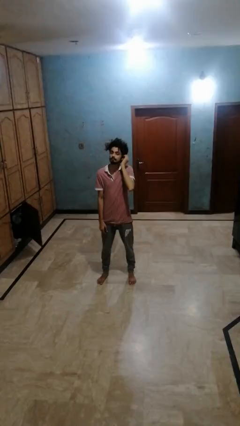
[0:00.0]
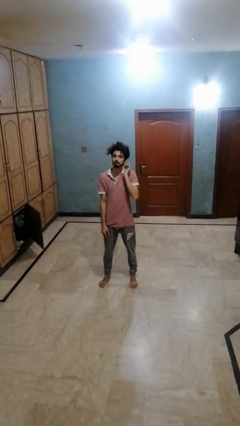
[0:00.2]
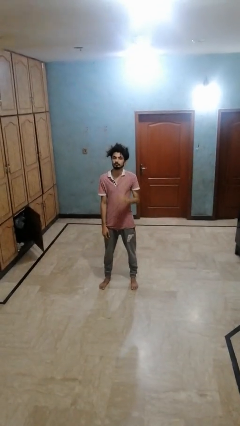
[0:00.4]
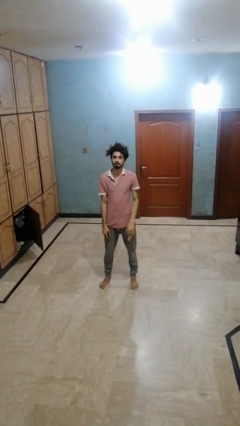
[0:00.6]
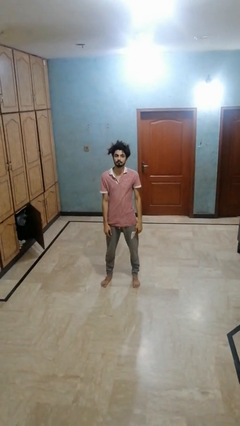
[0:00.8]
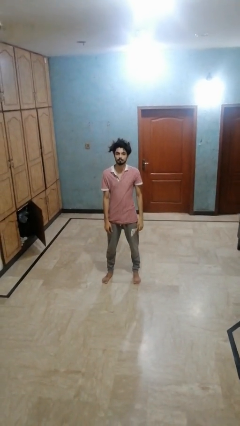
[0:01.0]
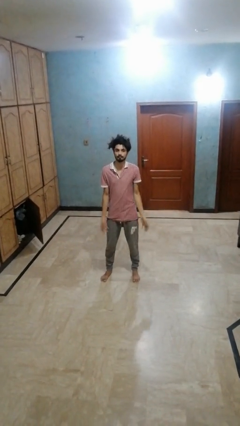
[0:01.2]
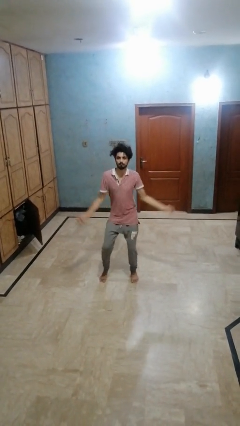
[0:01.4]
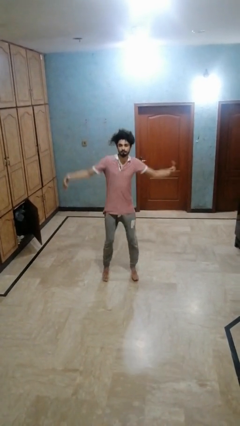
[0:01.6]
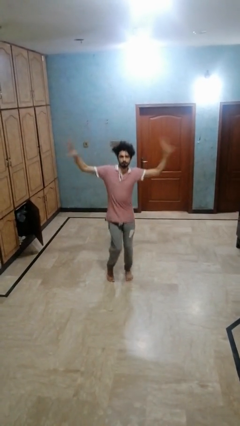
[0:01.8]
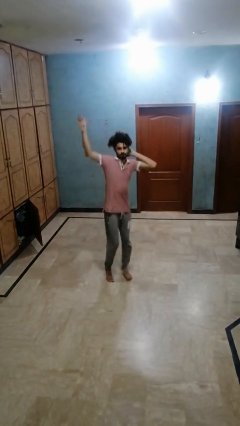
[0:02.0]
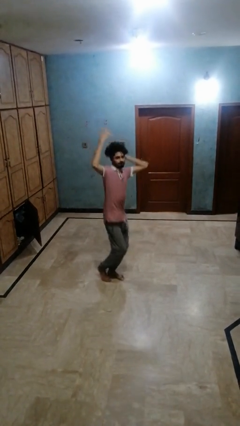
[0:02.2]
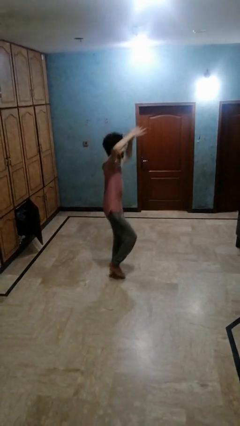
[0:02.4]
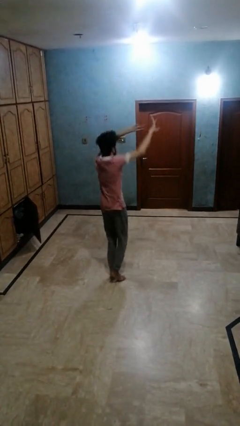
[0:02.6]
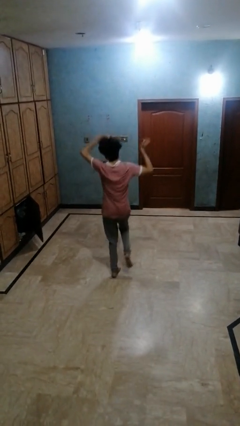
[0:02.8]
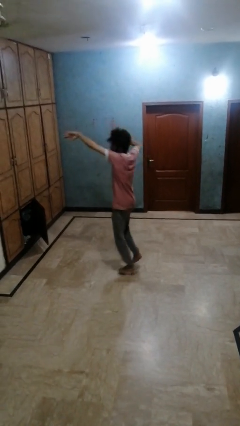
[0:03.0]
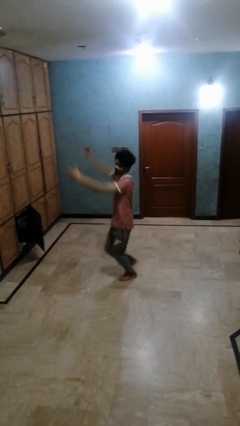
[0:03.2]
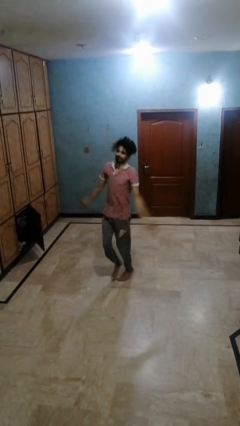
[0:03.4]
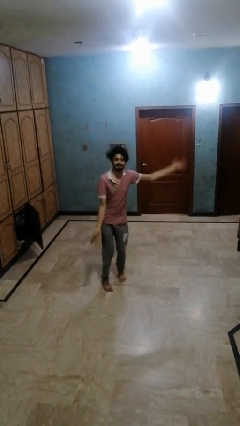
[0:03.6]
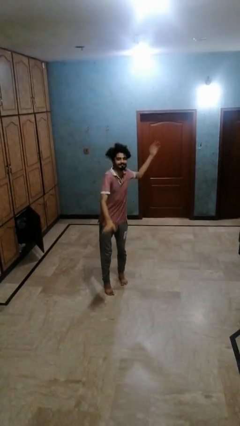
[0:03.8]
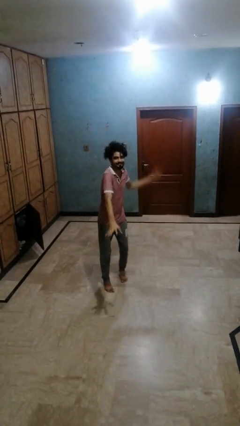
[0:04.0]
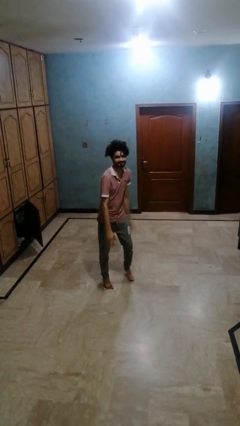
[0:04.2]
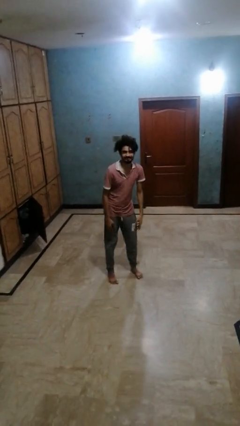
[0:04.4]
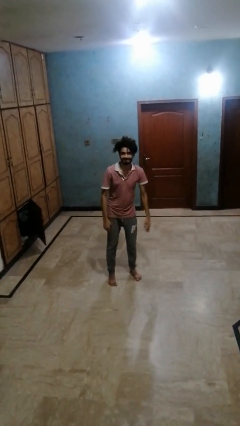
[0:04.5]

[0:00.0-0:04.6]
person dances in place

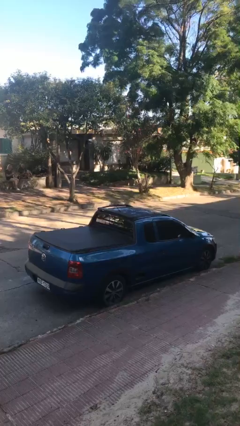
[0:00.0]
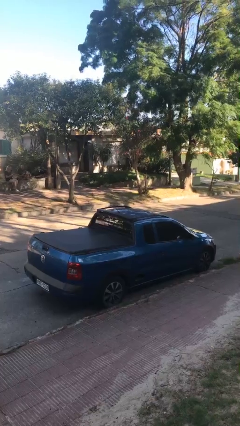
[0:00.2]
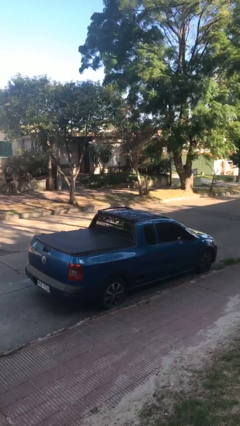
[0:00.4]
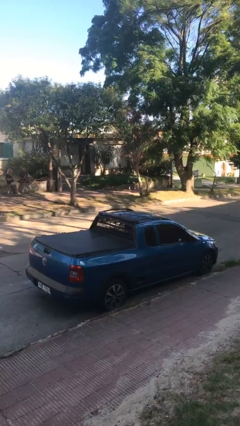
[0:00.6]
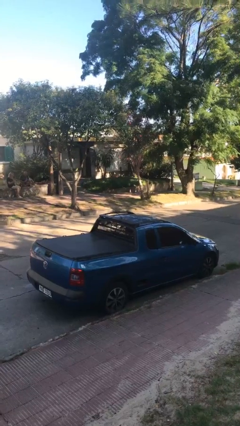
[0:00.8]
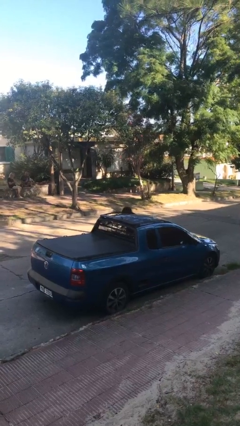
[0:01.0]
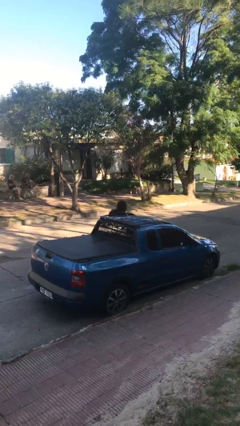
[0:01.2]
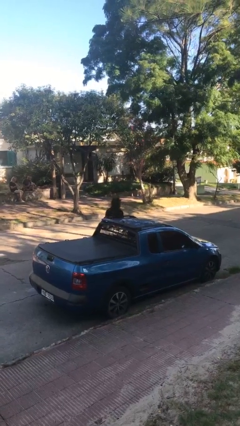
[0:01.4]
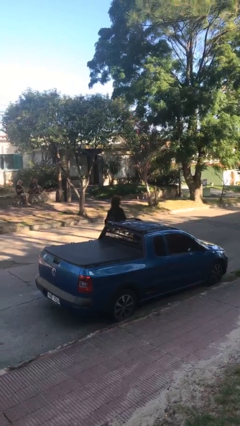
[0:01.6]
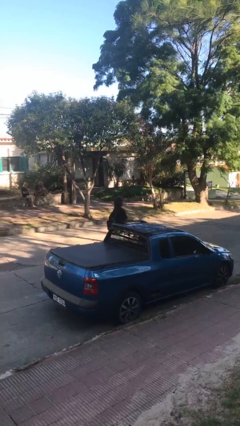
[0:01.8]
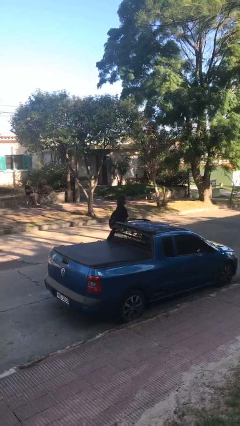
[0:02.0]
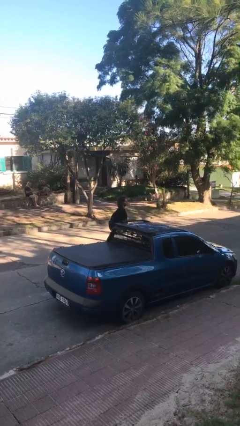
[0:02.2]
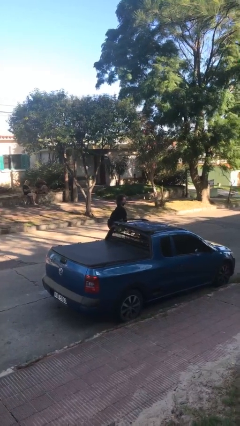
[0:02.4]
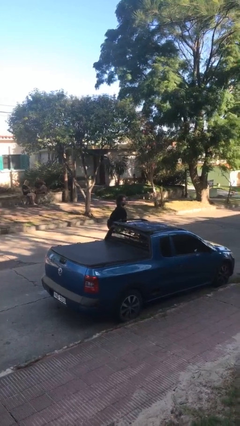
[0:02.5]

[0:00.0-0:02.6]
person exits car

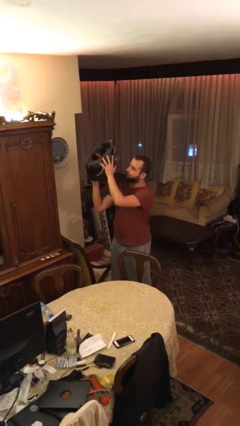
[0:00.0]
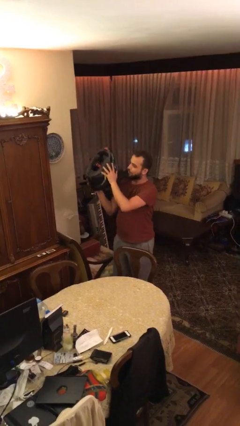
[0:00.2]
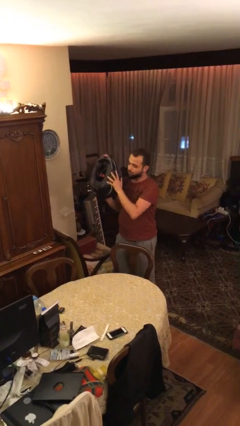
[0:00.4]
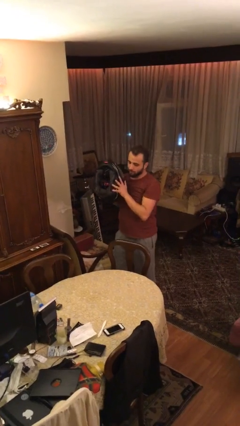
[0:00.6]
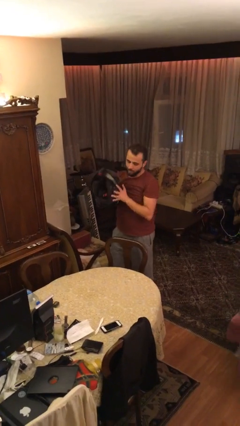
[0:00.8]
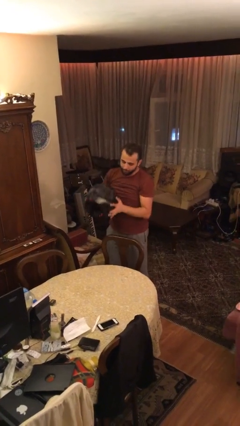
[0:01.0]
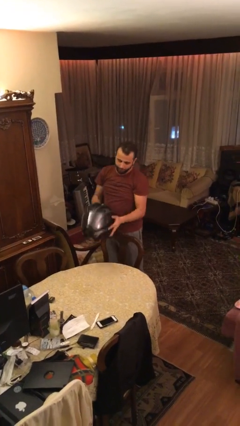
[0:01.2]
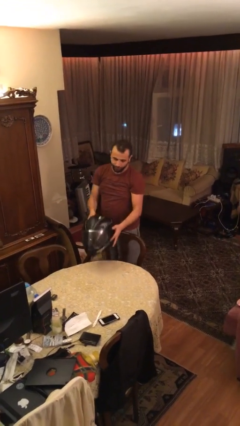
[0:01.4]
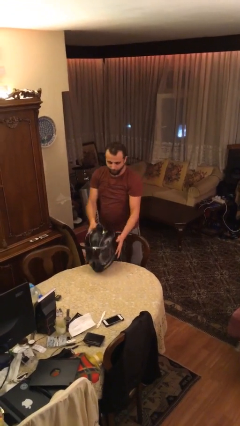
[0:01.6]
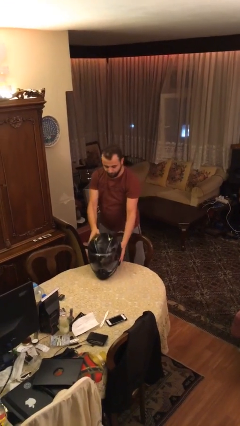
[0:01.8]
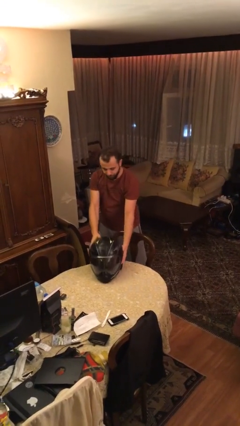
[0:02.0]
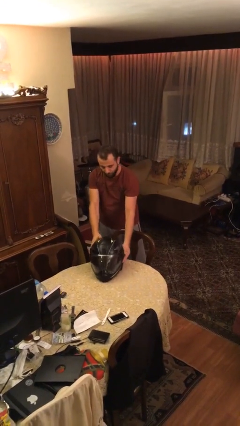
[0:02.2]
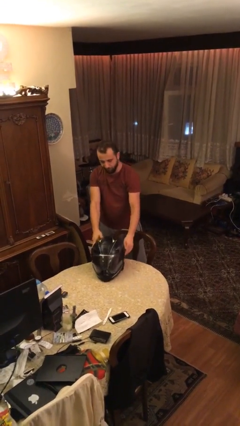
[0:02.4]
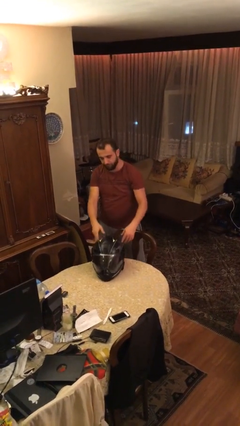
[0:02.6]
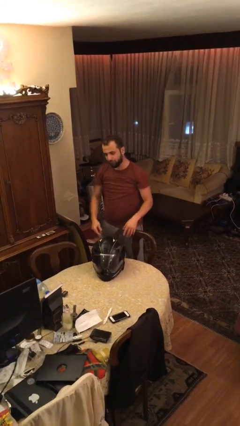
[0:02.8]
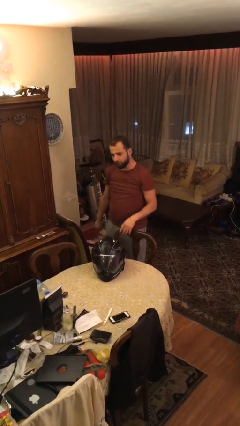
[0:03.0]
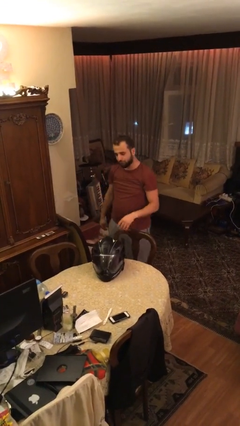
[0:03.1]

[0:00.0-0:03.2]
person puts down object on table

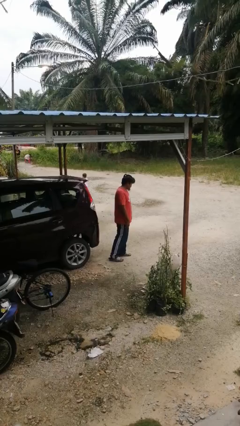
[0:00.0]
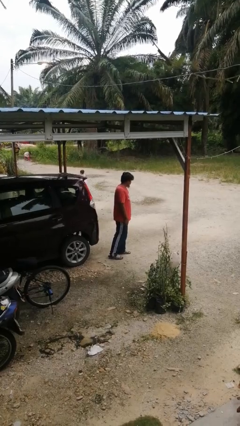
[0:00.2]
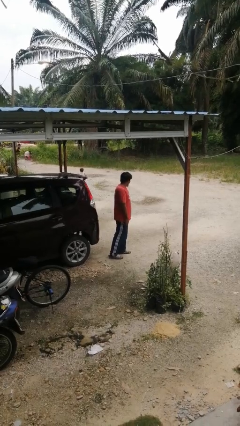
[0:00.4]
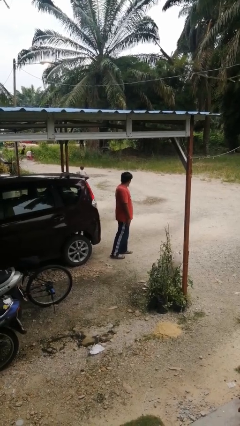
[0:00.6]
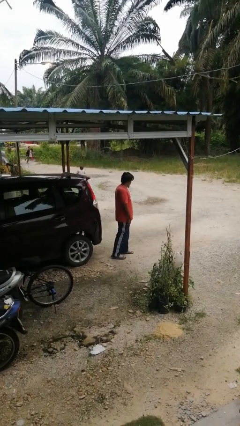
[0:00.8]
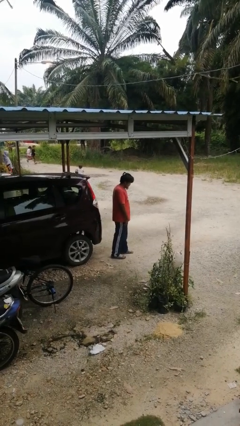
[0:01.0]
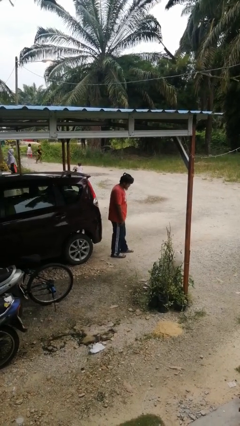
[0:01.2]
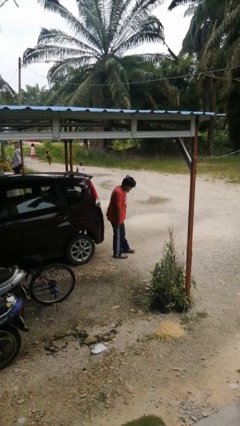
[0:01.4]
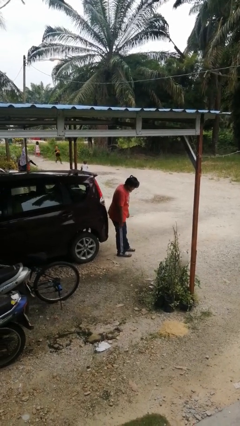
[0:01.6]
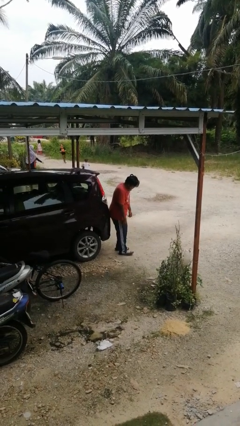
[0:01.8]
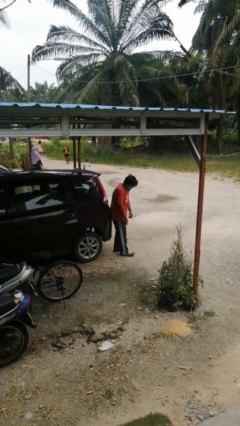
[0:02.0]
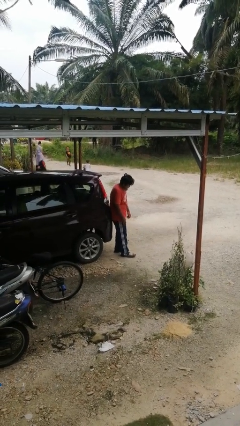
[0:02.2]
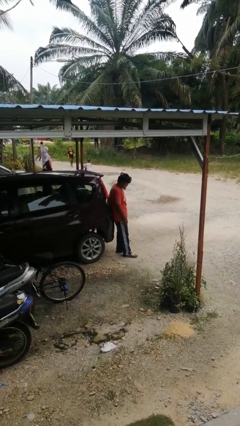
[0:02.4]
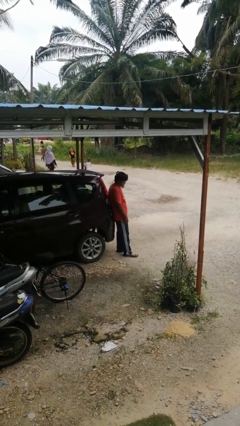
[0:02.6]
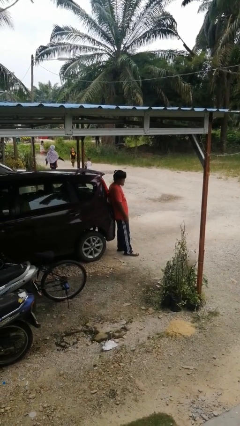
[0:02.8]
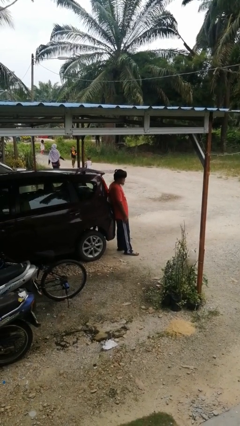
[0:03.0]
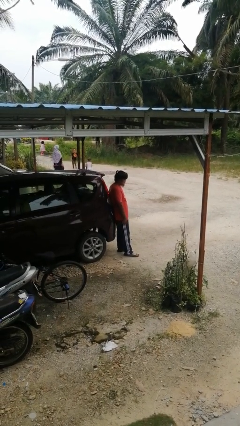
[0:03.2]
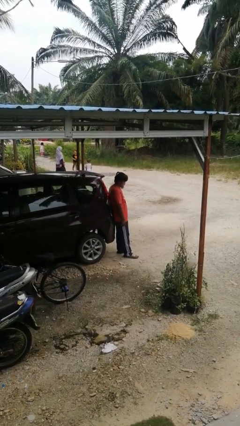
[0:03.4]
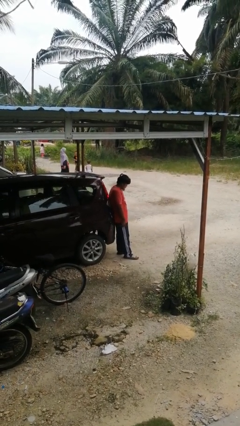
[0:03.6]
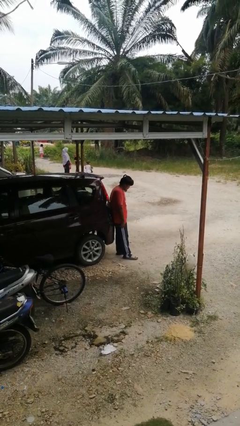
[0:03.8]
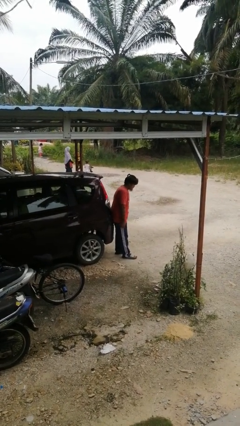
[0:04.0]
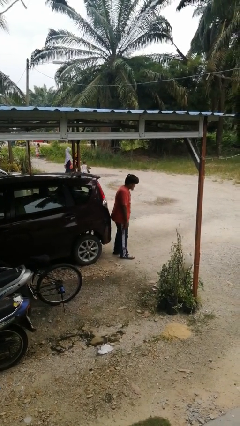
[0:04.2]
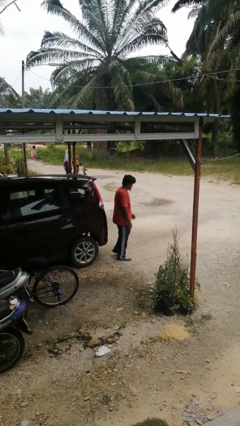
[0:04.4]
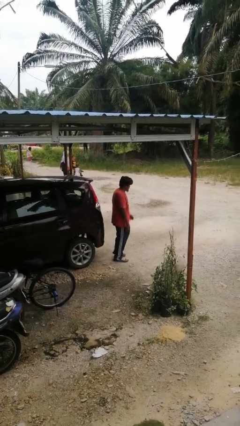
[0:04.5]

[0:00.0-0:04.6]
person leans against car

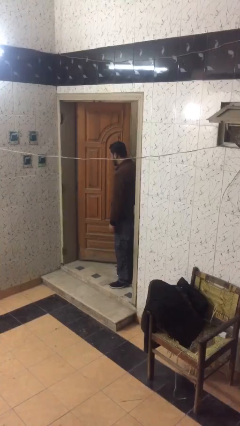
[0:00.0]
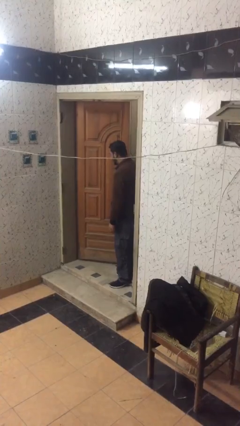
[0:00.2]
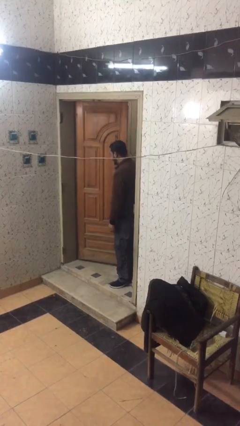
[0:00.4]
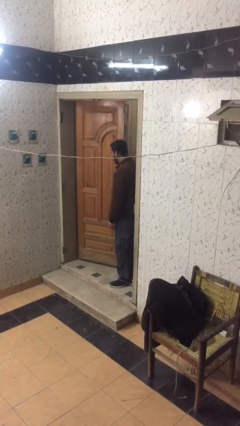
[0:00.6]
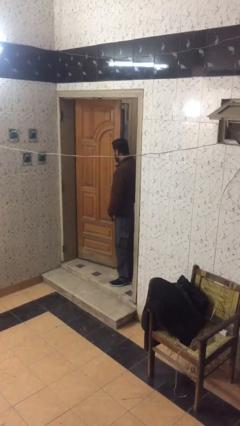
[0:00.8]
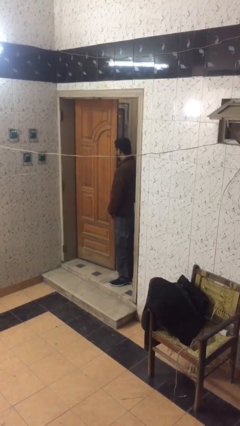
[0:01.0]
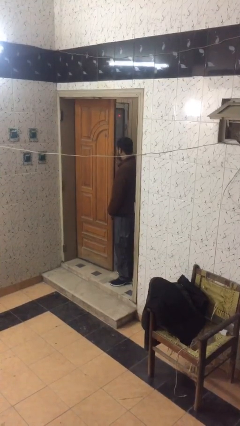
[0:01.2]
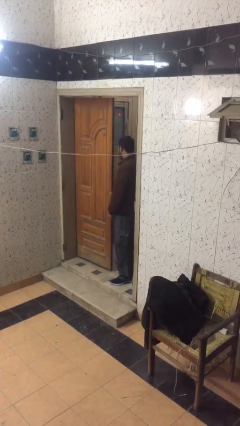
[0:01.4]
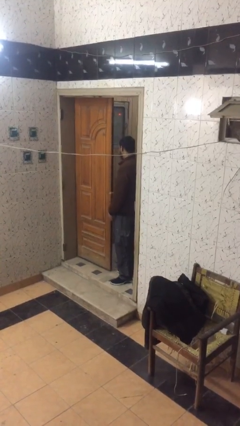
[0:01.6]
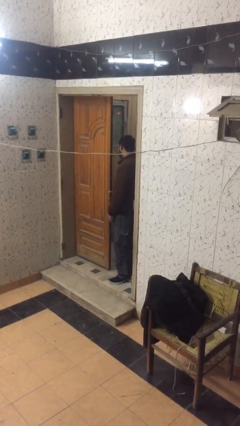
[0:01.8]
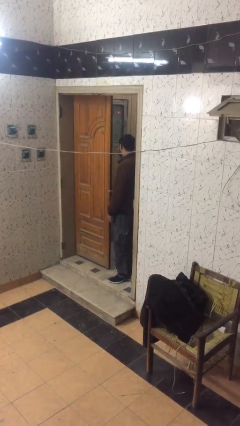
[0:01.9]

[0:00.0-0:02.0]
person closes facility door

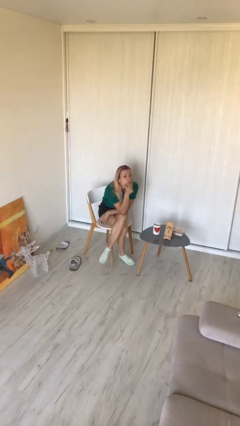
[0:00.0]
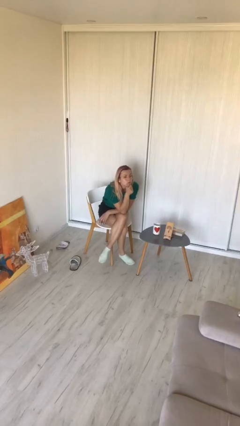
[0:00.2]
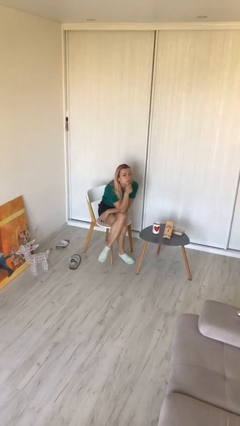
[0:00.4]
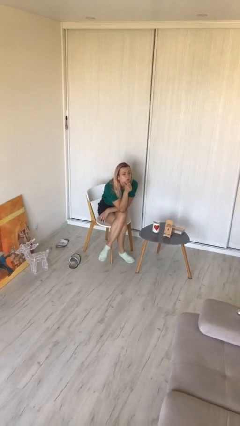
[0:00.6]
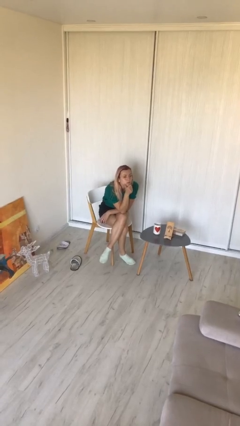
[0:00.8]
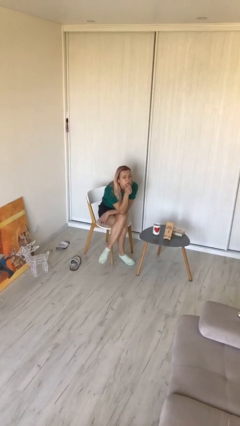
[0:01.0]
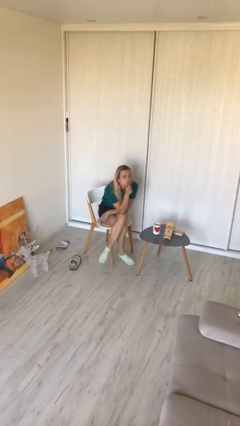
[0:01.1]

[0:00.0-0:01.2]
person strokes chin
